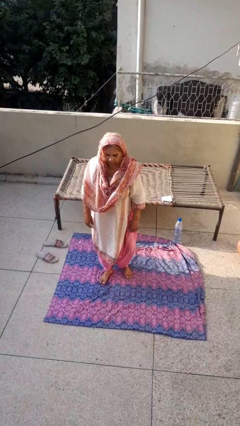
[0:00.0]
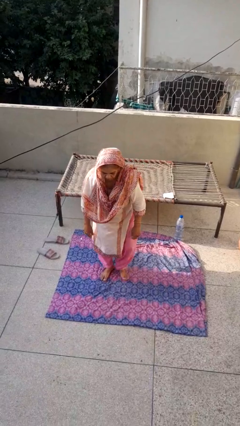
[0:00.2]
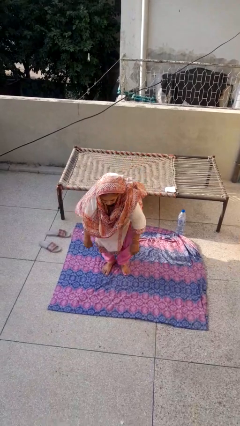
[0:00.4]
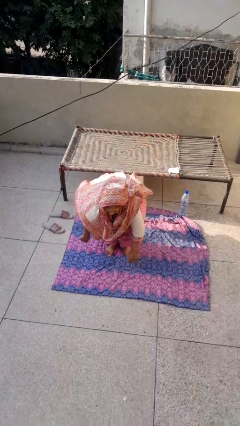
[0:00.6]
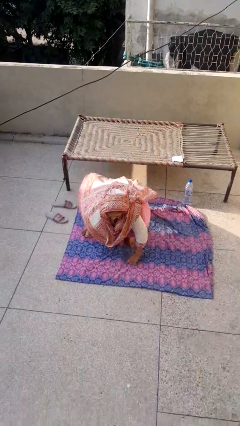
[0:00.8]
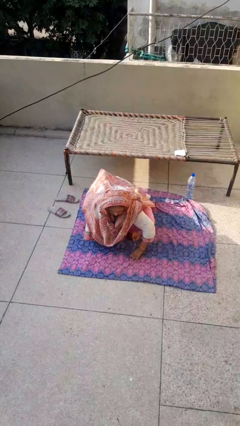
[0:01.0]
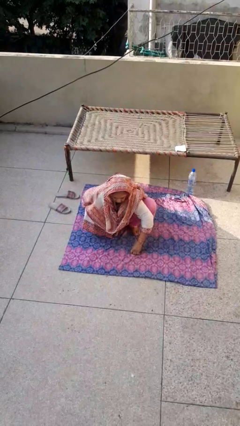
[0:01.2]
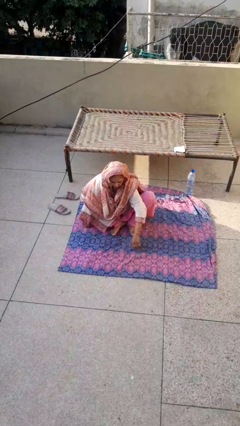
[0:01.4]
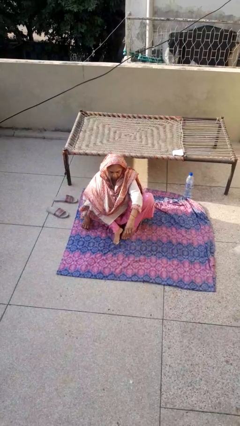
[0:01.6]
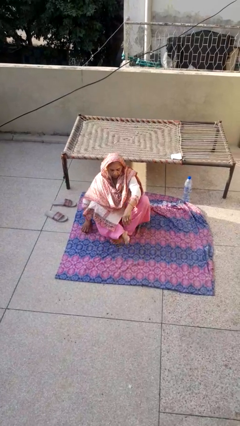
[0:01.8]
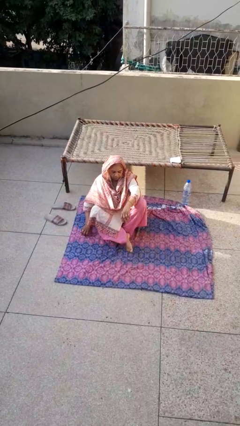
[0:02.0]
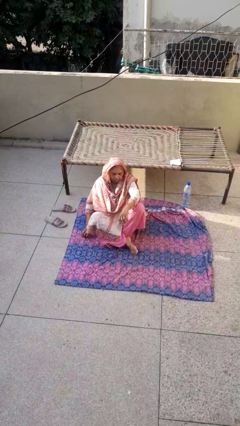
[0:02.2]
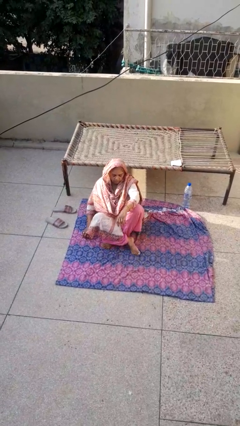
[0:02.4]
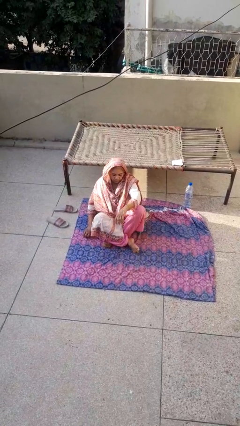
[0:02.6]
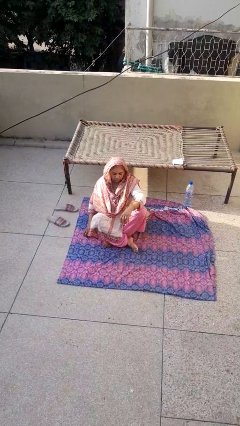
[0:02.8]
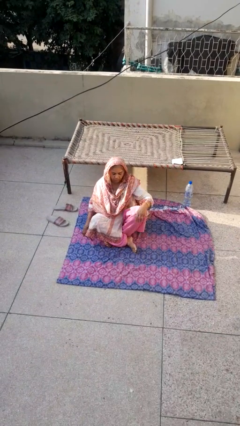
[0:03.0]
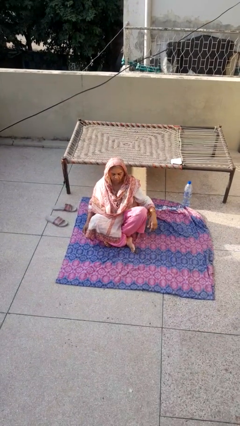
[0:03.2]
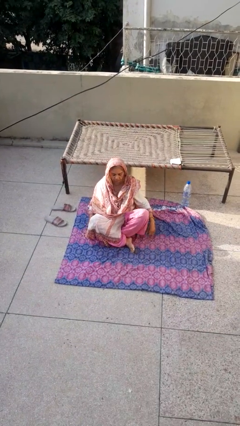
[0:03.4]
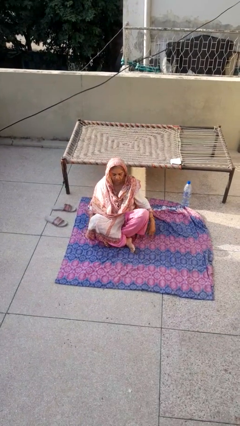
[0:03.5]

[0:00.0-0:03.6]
person sits crisscross

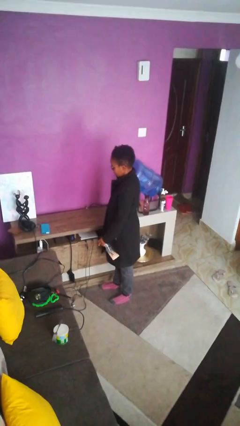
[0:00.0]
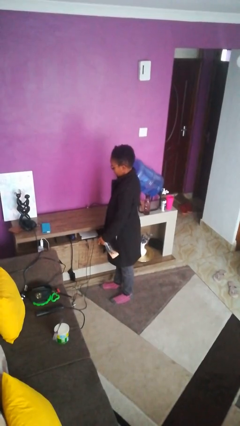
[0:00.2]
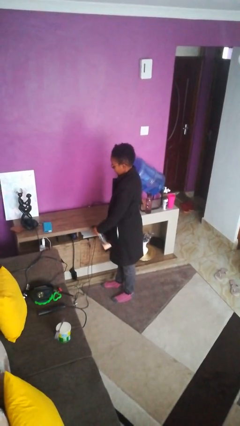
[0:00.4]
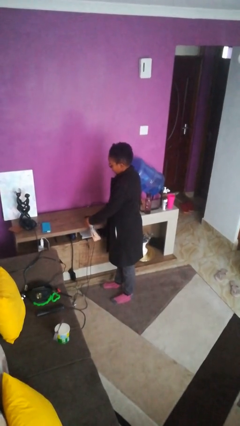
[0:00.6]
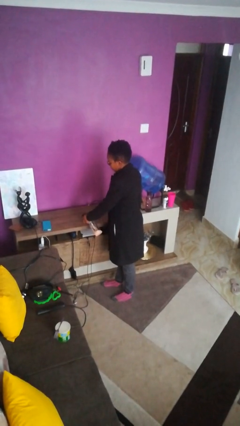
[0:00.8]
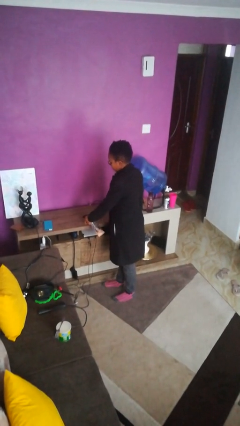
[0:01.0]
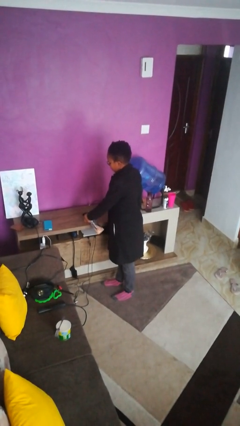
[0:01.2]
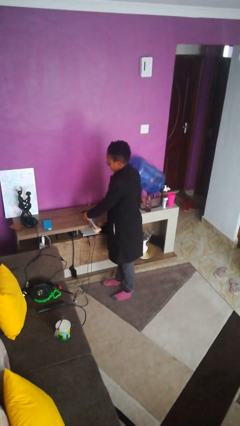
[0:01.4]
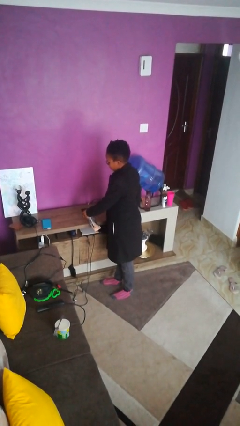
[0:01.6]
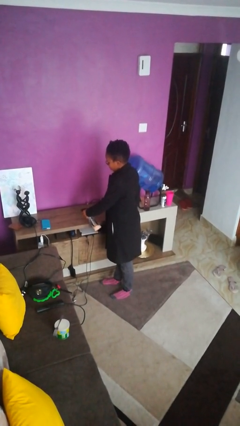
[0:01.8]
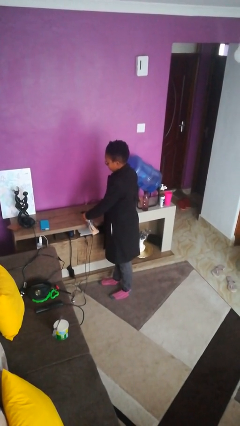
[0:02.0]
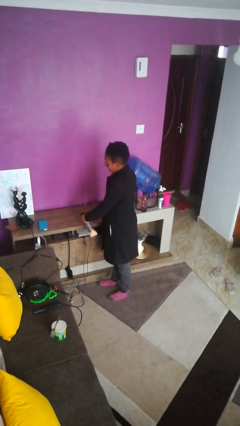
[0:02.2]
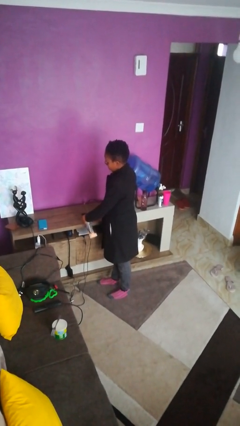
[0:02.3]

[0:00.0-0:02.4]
person sprays from bottle

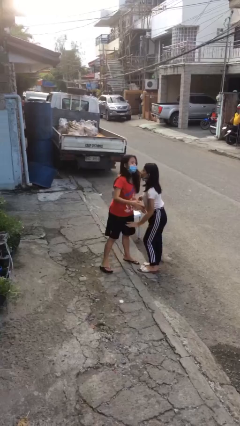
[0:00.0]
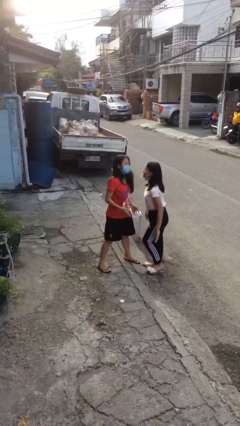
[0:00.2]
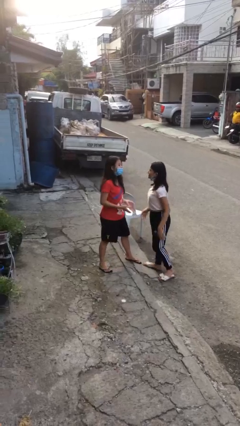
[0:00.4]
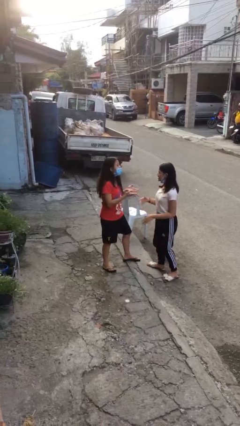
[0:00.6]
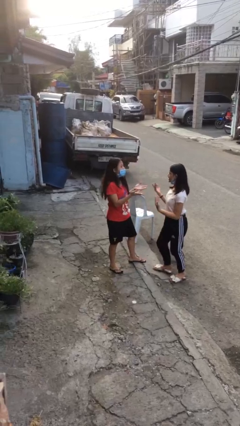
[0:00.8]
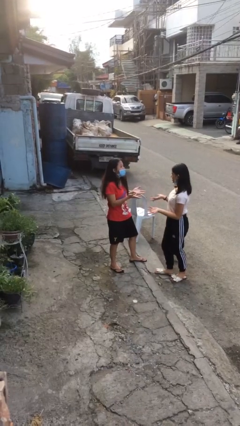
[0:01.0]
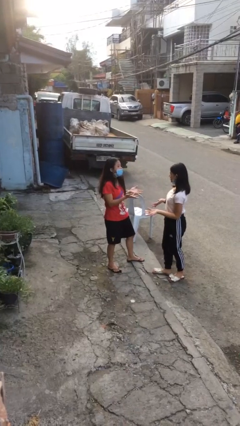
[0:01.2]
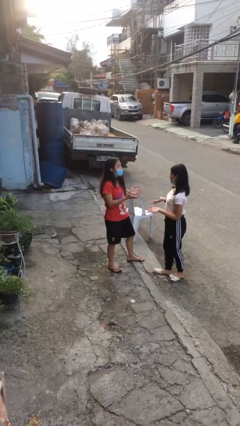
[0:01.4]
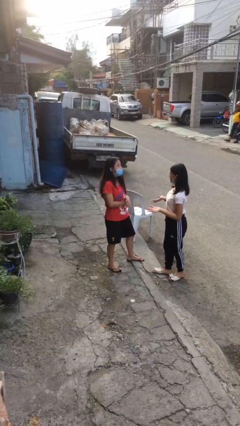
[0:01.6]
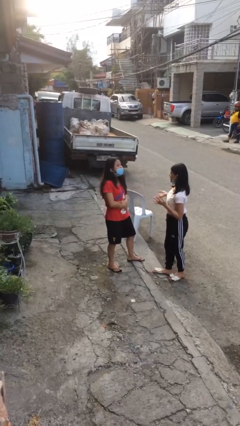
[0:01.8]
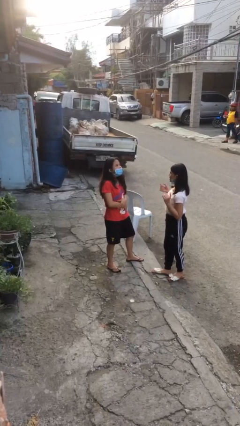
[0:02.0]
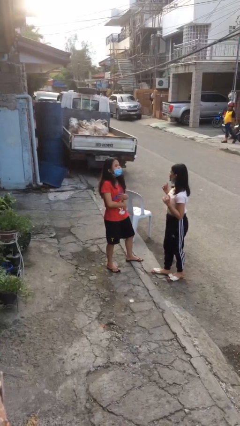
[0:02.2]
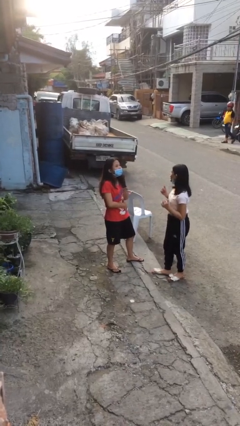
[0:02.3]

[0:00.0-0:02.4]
person talks to person

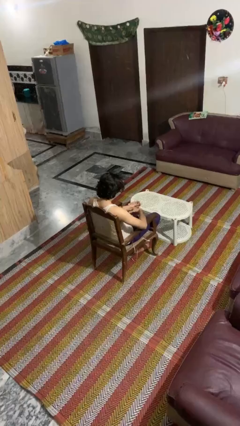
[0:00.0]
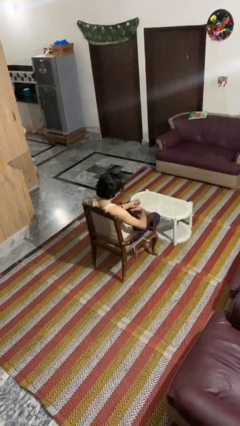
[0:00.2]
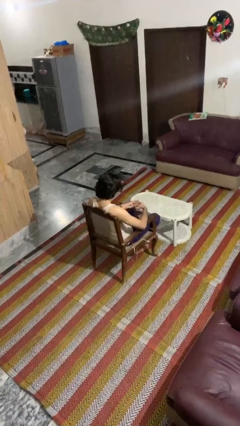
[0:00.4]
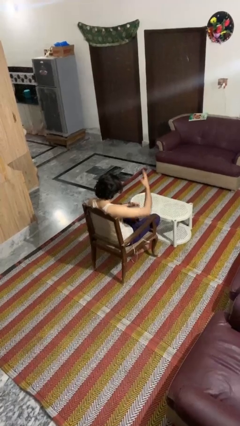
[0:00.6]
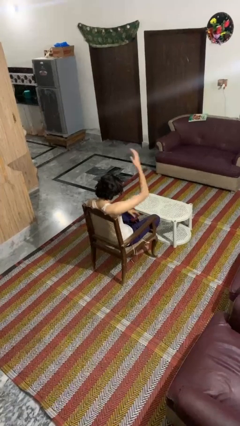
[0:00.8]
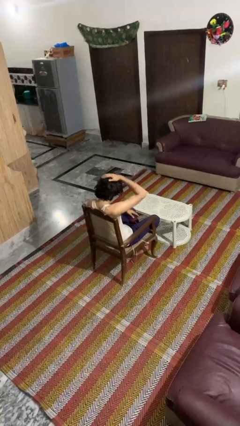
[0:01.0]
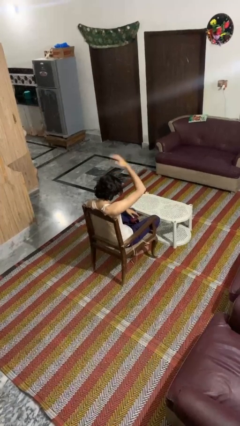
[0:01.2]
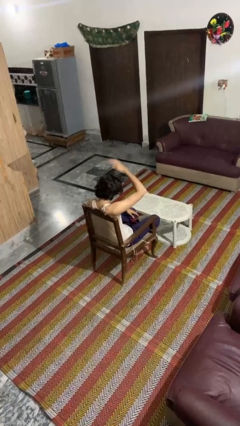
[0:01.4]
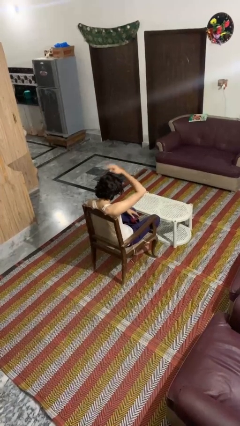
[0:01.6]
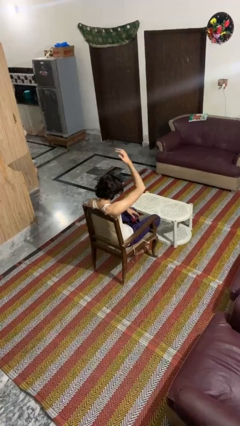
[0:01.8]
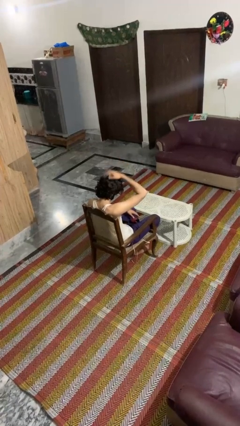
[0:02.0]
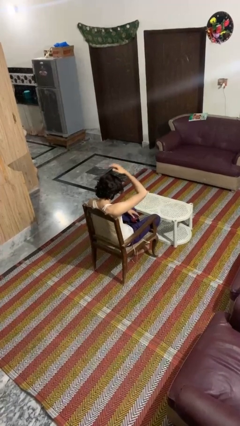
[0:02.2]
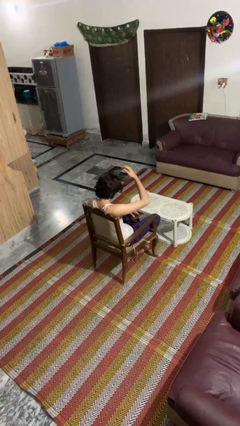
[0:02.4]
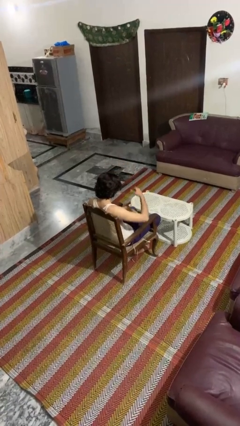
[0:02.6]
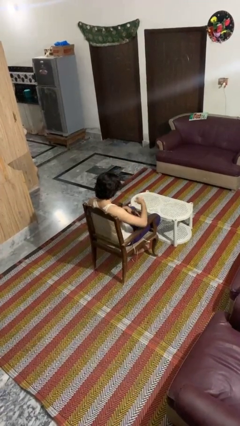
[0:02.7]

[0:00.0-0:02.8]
person pats head

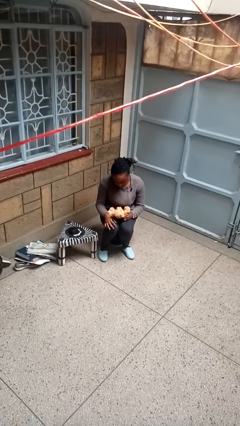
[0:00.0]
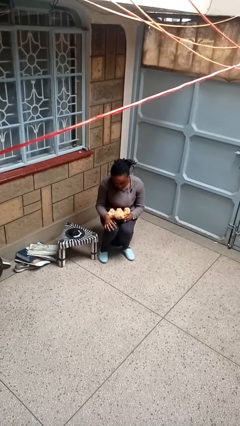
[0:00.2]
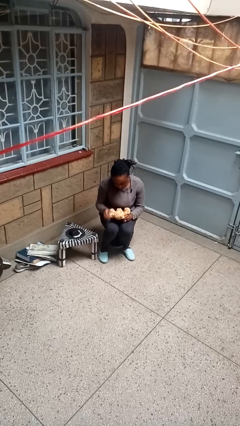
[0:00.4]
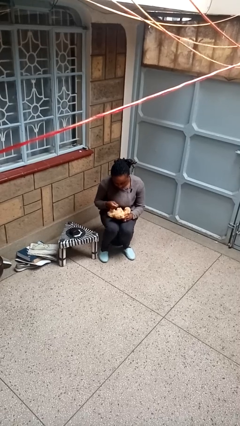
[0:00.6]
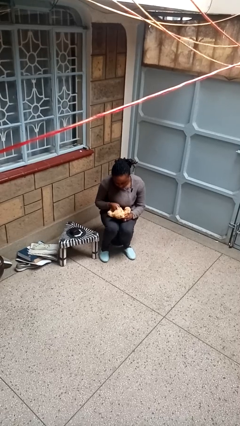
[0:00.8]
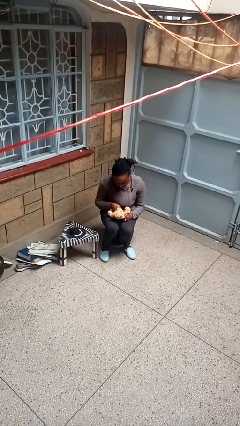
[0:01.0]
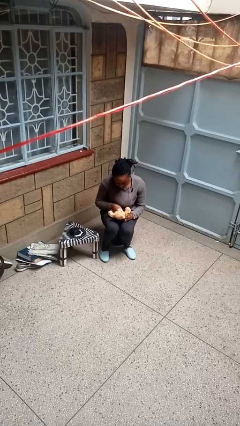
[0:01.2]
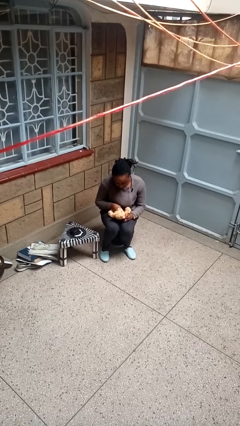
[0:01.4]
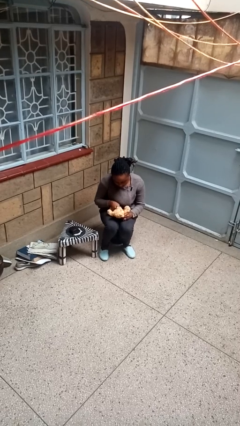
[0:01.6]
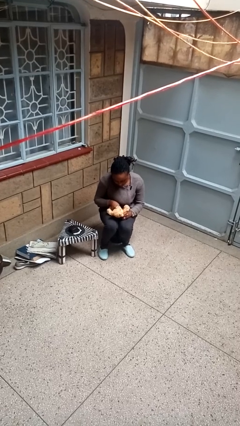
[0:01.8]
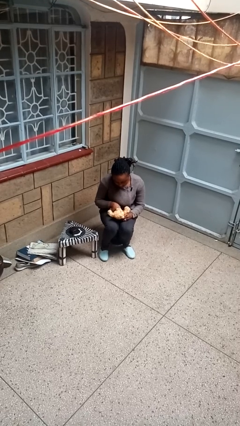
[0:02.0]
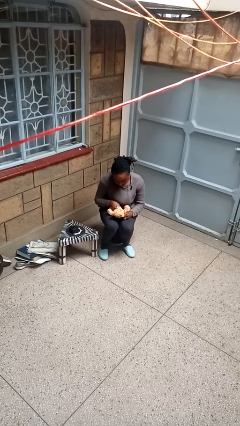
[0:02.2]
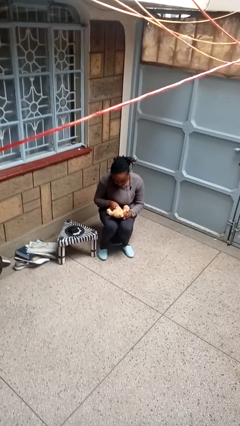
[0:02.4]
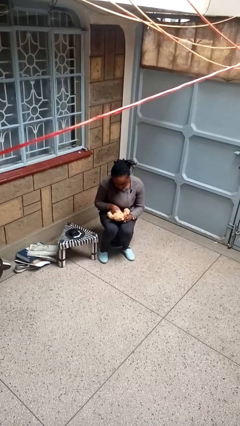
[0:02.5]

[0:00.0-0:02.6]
person squeezes object

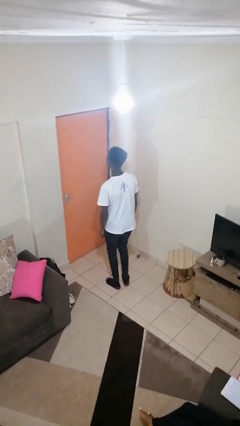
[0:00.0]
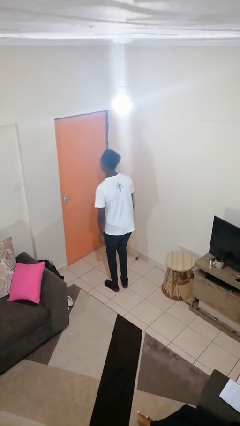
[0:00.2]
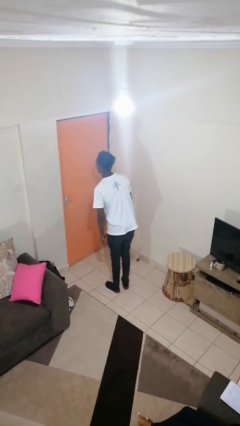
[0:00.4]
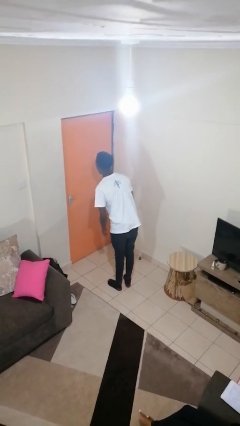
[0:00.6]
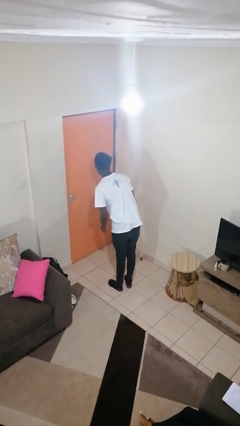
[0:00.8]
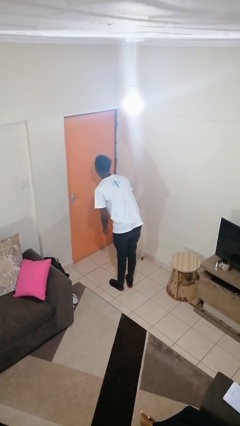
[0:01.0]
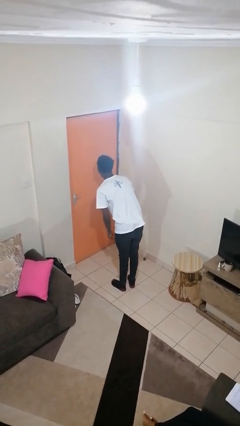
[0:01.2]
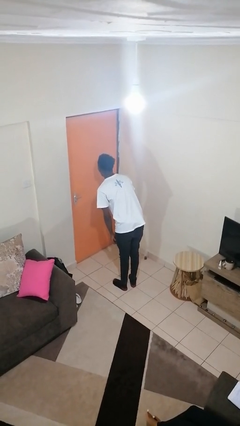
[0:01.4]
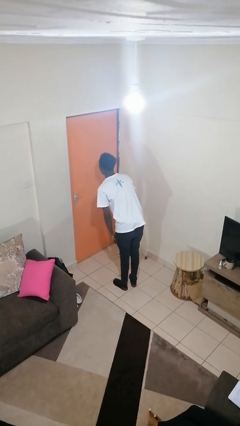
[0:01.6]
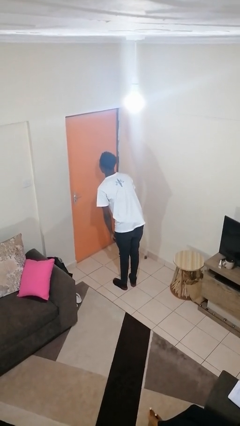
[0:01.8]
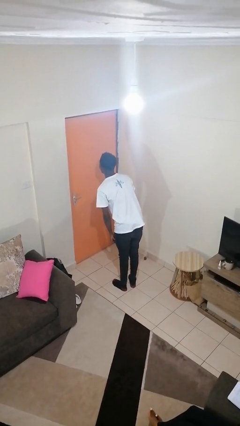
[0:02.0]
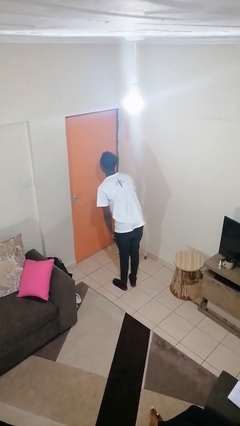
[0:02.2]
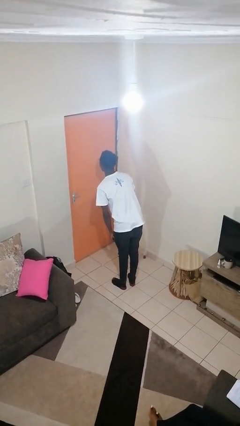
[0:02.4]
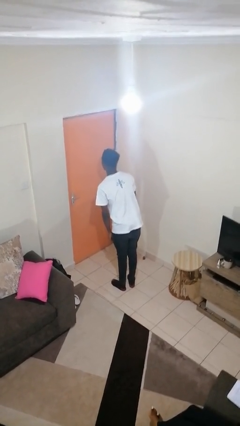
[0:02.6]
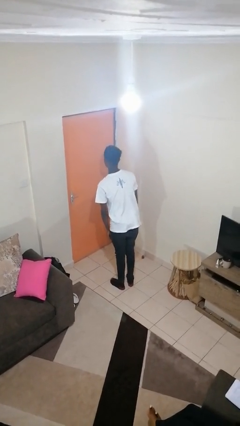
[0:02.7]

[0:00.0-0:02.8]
person sticks out tongue

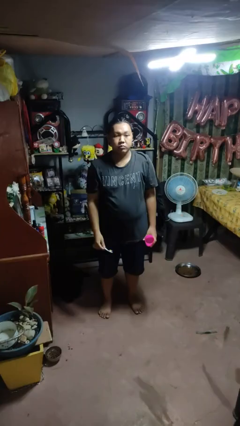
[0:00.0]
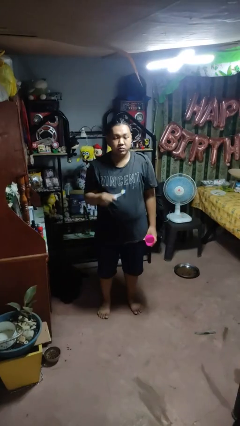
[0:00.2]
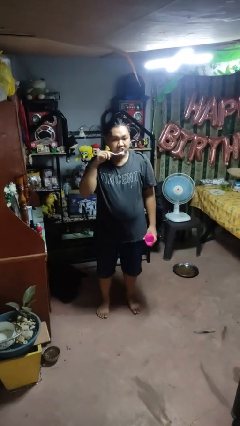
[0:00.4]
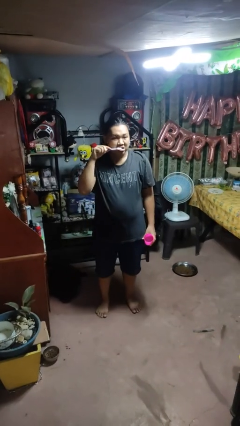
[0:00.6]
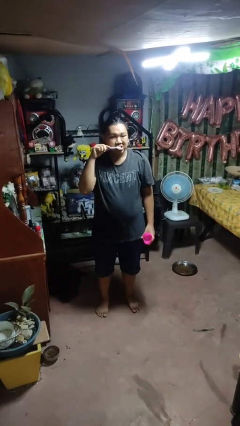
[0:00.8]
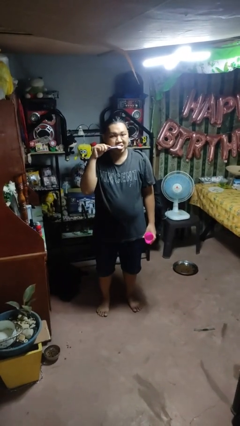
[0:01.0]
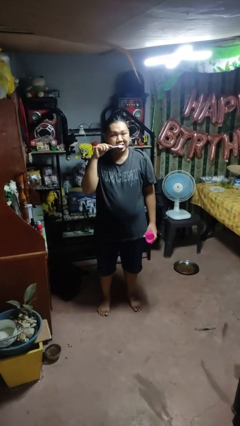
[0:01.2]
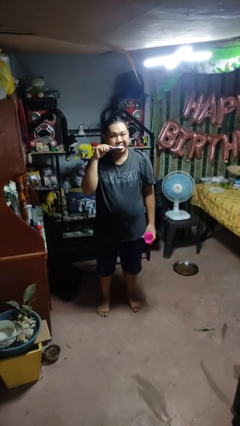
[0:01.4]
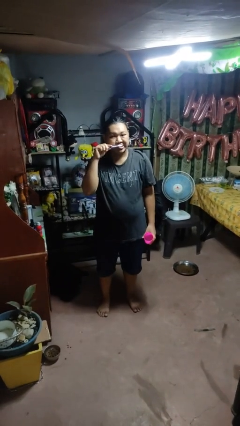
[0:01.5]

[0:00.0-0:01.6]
person brushes teeth
